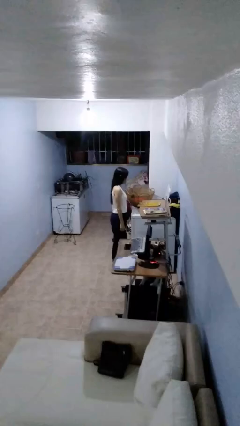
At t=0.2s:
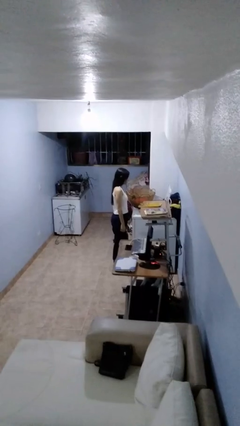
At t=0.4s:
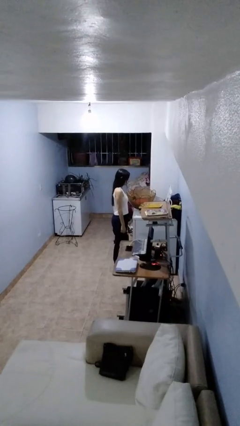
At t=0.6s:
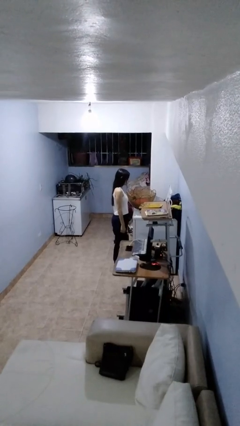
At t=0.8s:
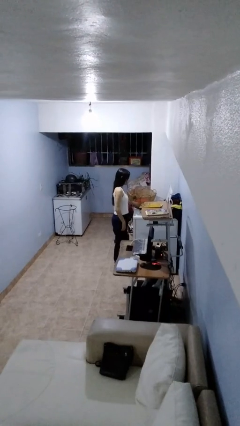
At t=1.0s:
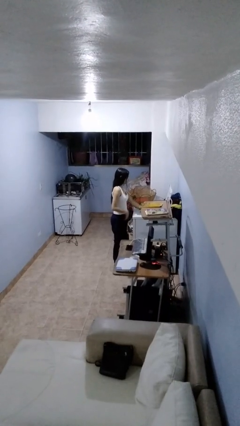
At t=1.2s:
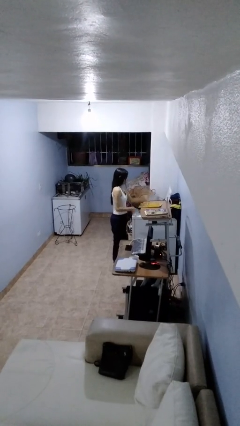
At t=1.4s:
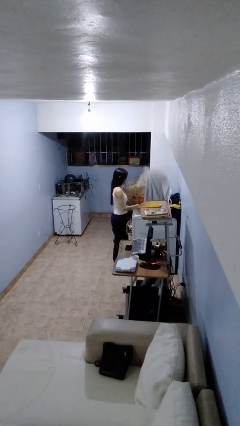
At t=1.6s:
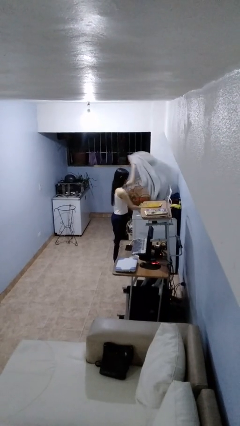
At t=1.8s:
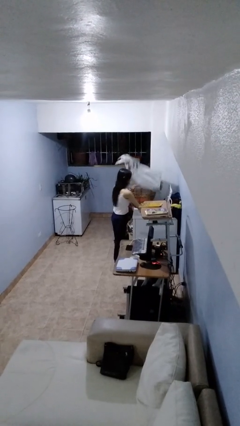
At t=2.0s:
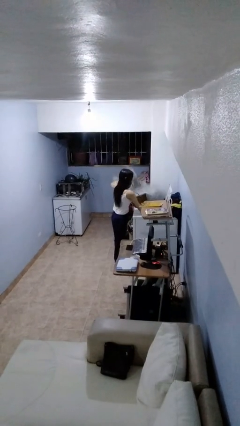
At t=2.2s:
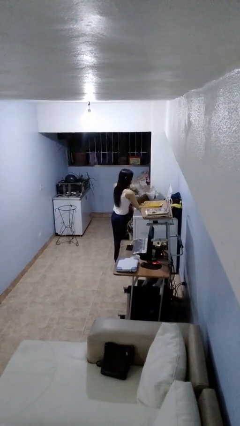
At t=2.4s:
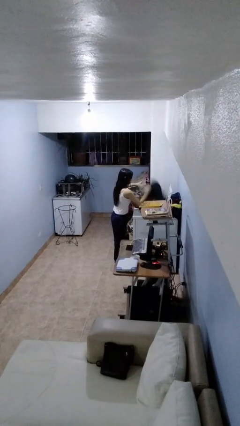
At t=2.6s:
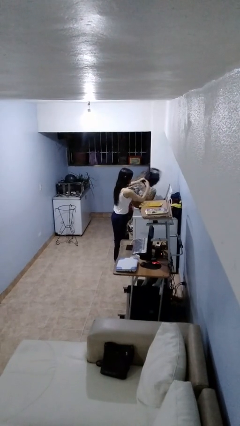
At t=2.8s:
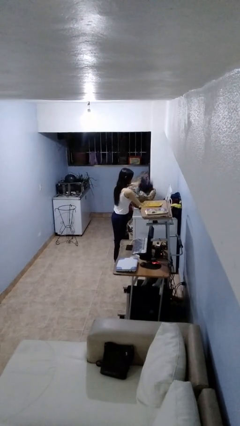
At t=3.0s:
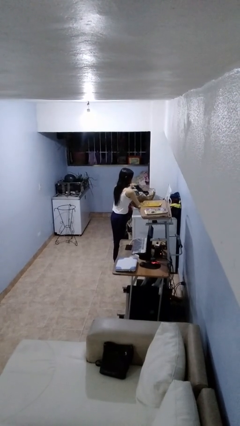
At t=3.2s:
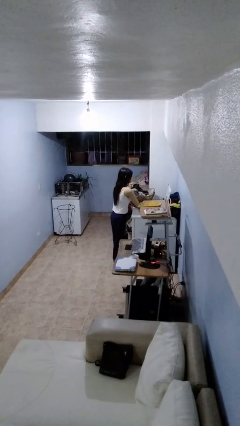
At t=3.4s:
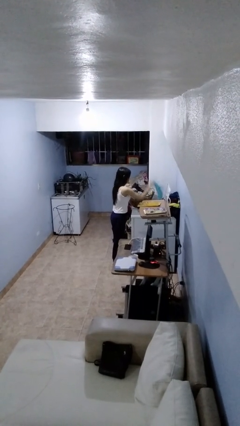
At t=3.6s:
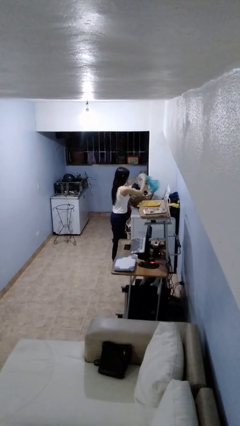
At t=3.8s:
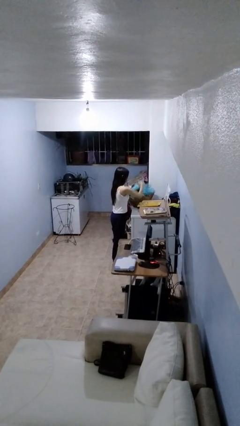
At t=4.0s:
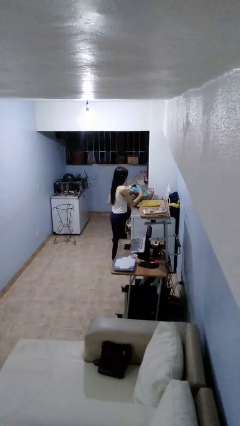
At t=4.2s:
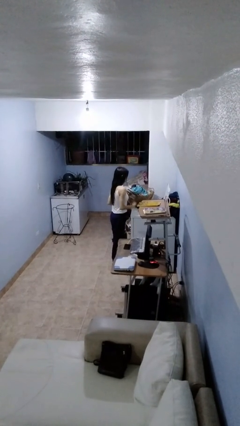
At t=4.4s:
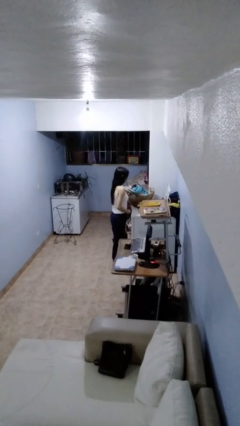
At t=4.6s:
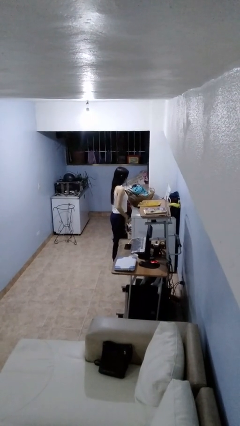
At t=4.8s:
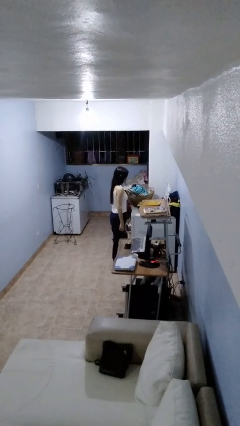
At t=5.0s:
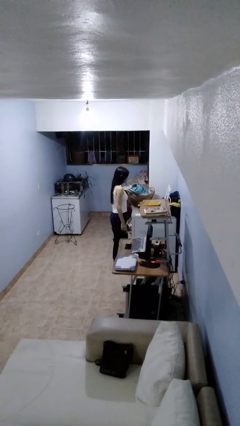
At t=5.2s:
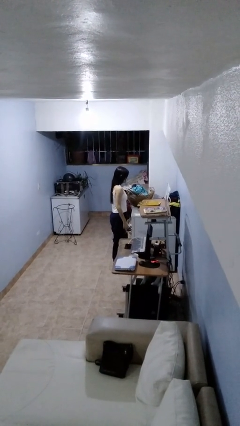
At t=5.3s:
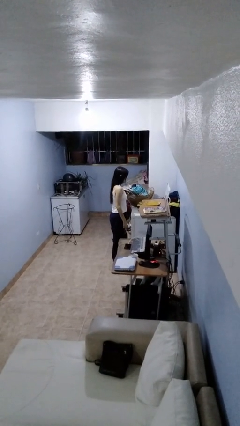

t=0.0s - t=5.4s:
person unloads clotheswasher

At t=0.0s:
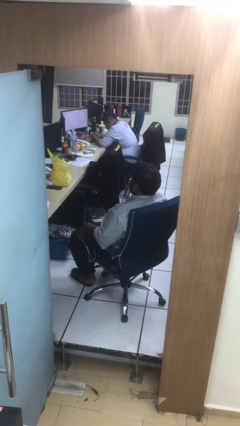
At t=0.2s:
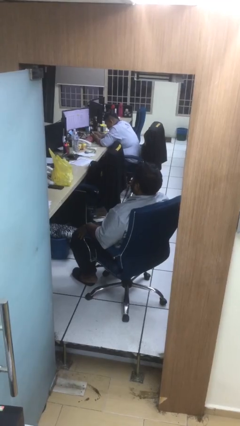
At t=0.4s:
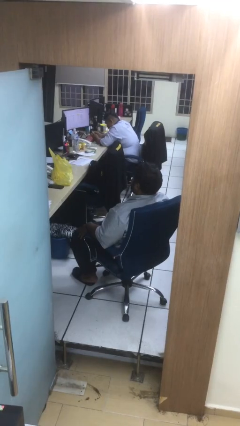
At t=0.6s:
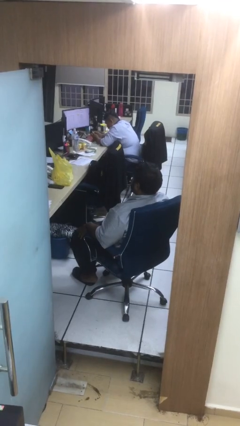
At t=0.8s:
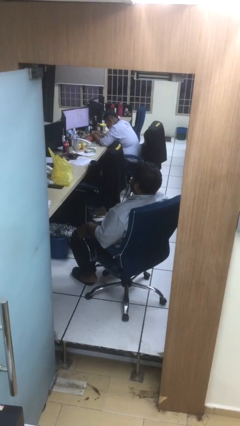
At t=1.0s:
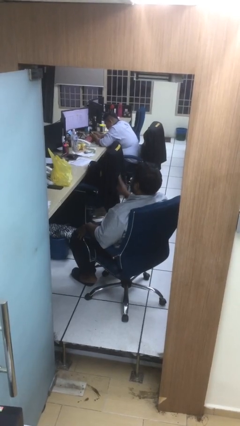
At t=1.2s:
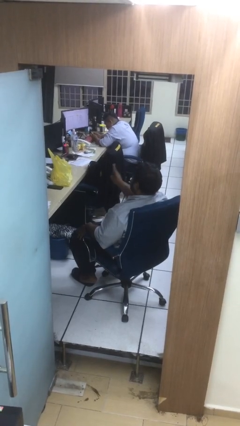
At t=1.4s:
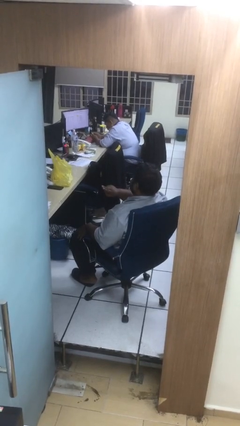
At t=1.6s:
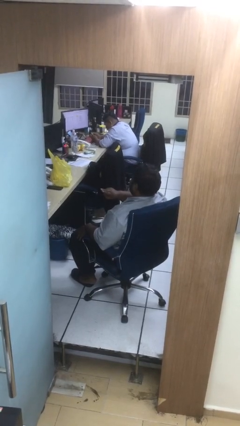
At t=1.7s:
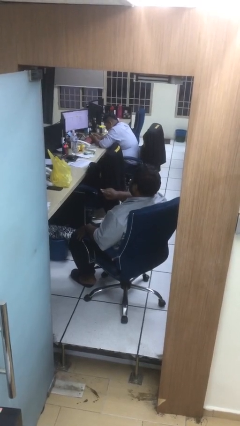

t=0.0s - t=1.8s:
person gestures swipe left

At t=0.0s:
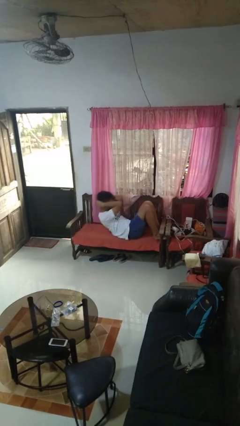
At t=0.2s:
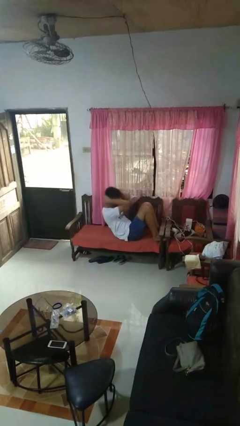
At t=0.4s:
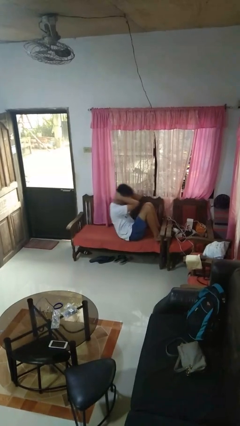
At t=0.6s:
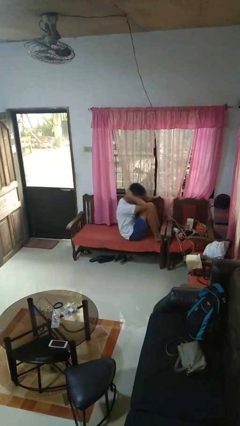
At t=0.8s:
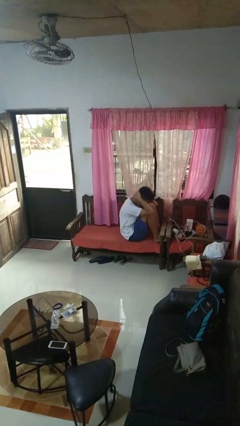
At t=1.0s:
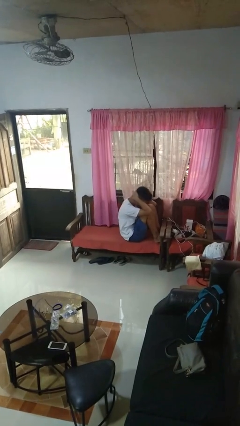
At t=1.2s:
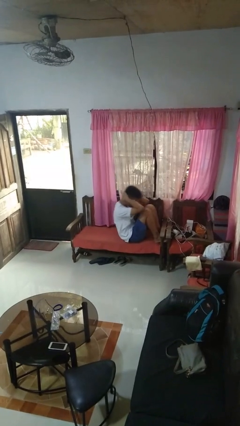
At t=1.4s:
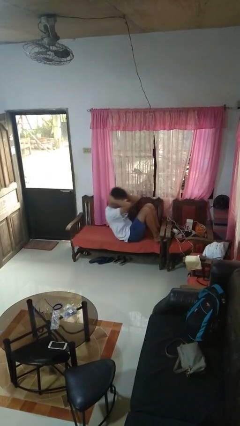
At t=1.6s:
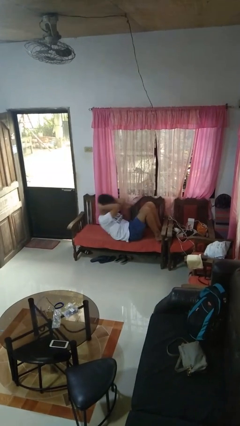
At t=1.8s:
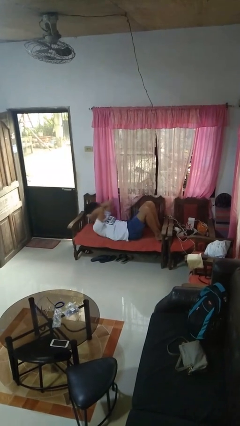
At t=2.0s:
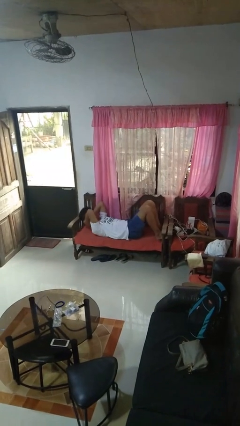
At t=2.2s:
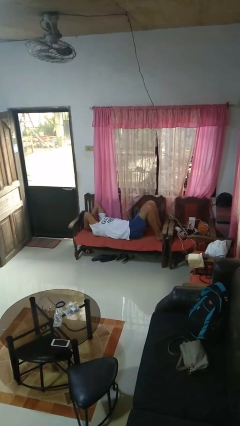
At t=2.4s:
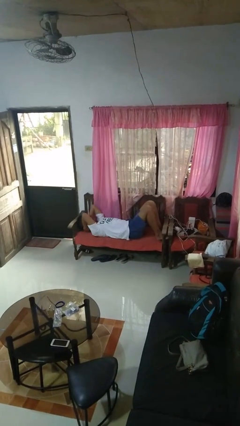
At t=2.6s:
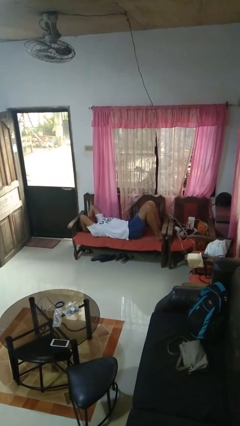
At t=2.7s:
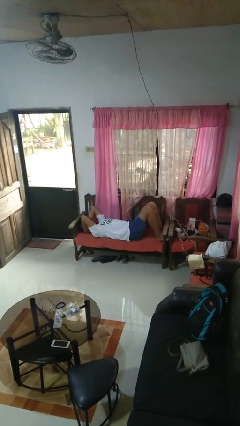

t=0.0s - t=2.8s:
person exercises with situp

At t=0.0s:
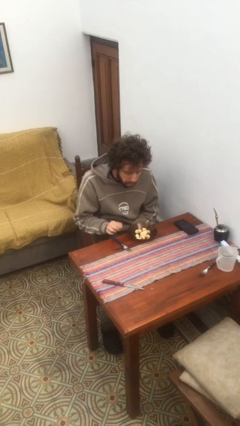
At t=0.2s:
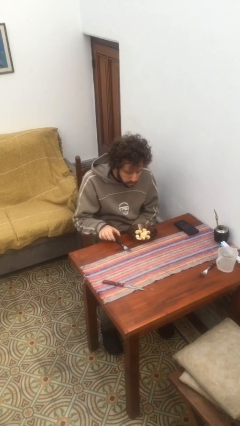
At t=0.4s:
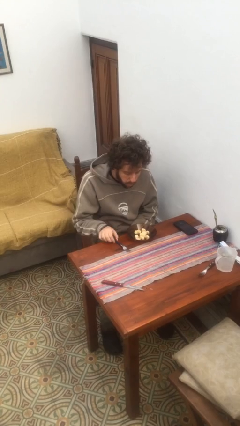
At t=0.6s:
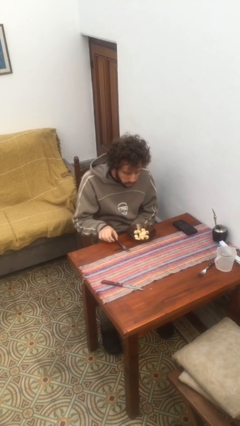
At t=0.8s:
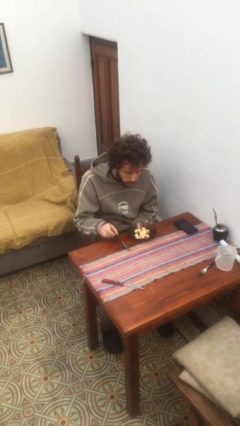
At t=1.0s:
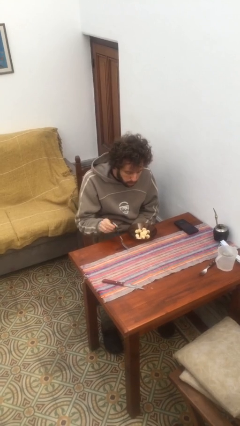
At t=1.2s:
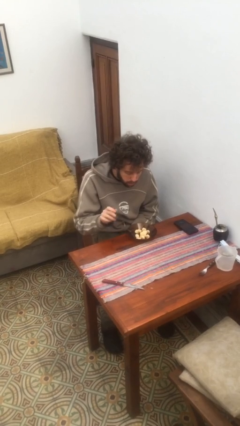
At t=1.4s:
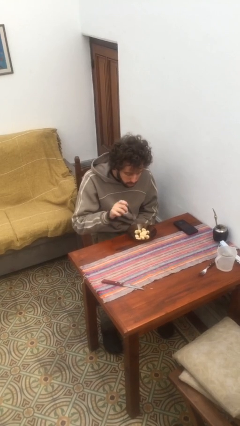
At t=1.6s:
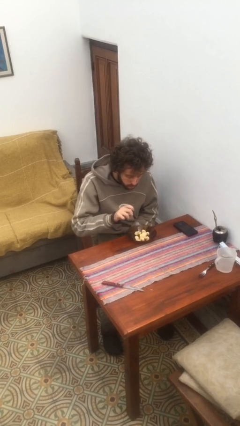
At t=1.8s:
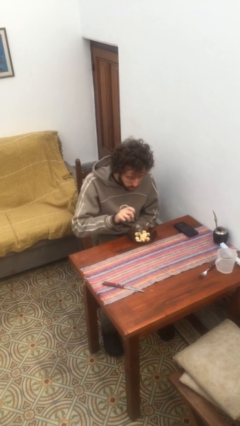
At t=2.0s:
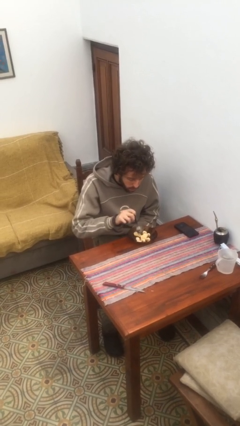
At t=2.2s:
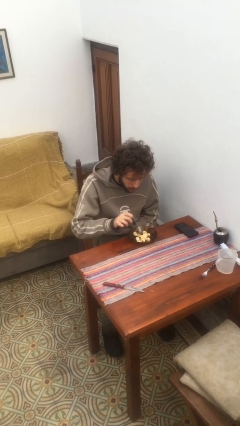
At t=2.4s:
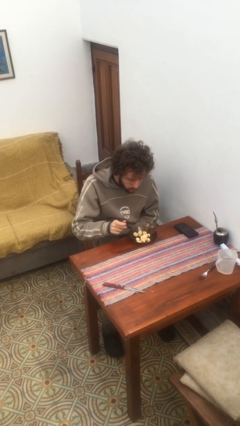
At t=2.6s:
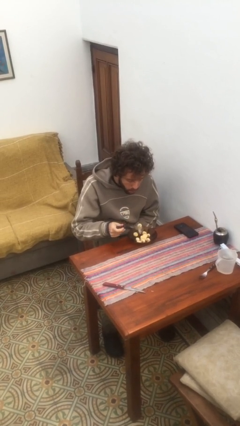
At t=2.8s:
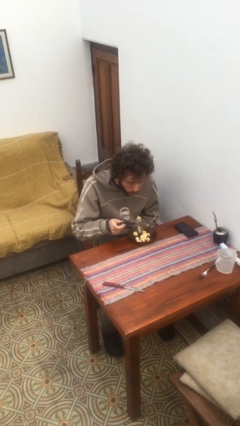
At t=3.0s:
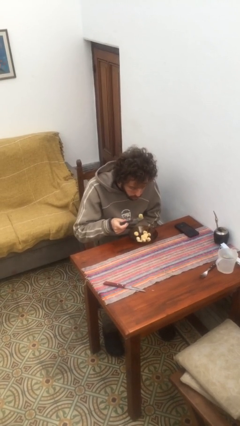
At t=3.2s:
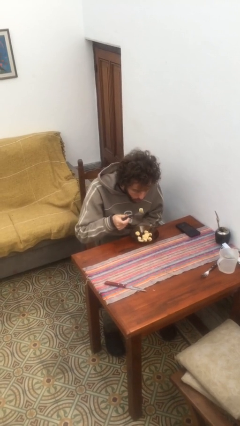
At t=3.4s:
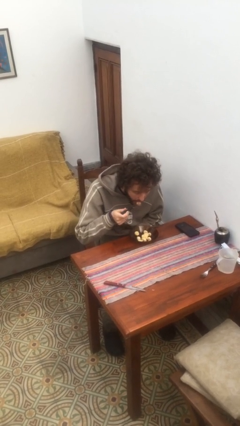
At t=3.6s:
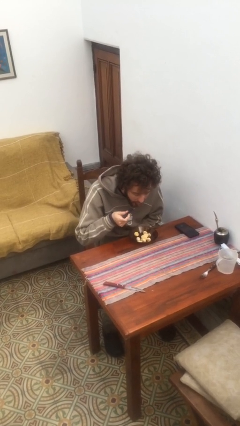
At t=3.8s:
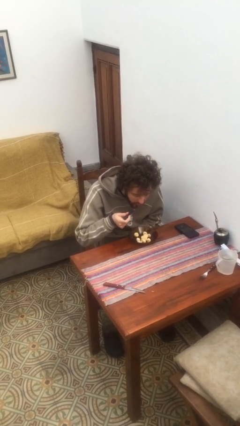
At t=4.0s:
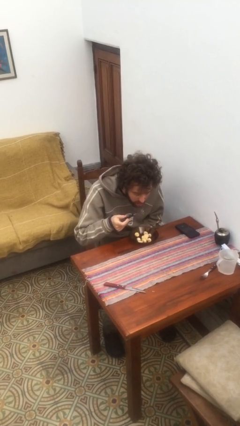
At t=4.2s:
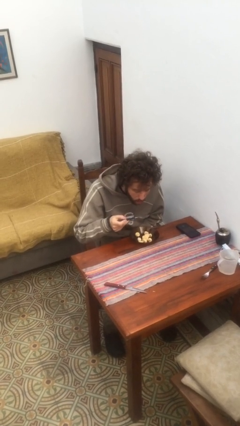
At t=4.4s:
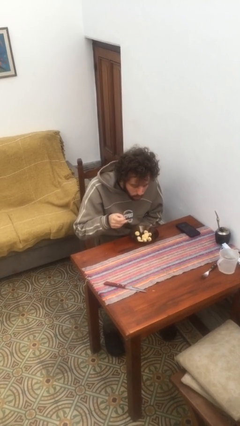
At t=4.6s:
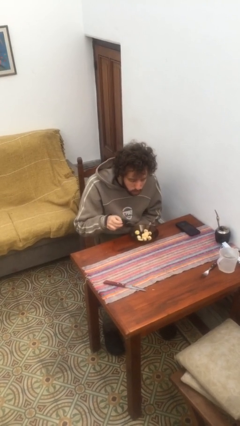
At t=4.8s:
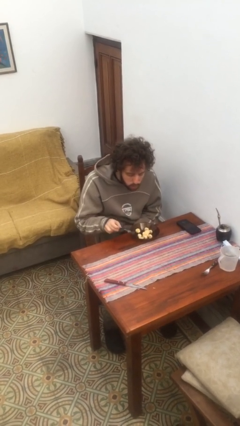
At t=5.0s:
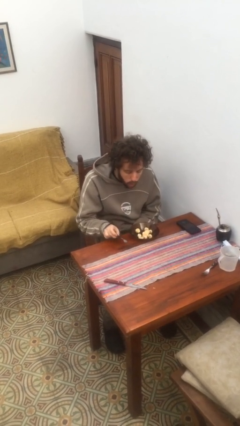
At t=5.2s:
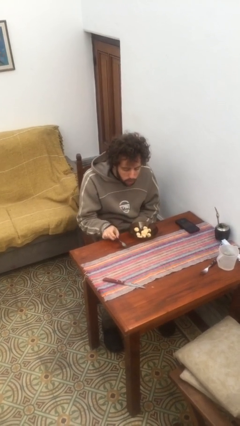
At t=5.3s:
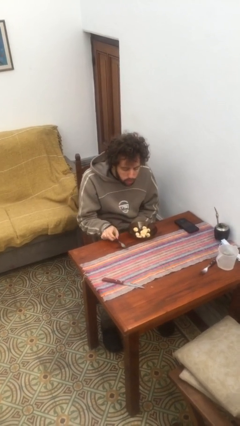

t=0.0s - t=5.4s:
person eats with utensil

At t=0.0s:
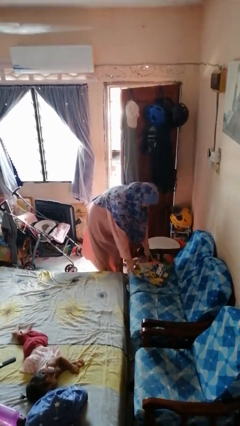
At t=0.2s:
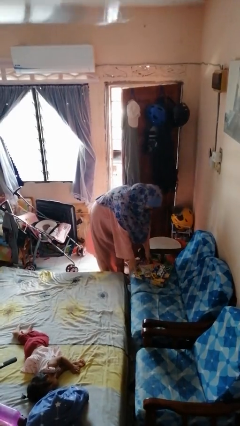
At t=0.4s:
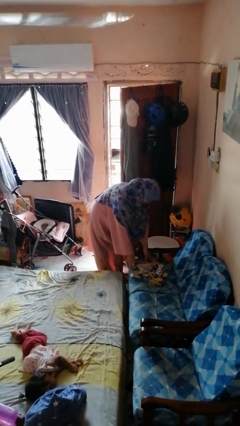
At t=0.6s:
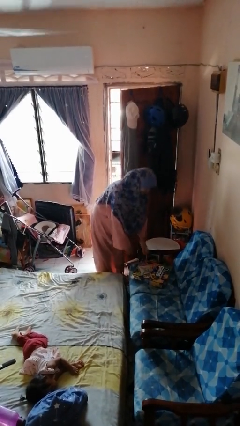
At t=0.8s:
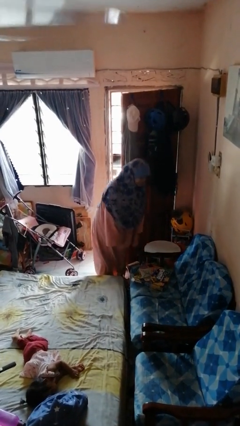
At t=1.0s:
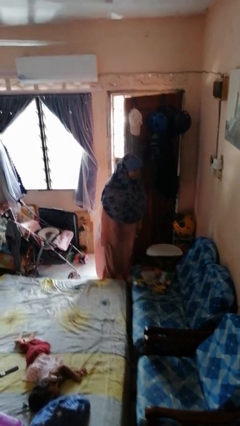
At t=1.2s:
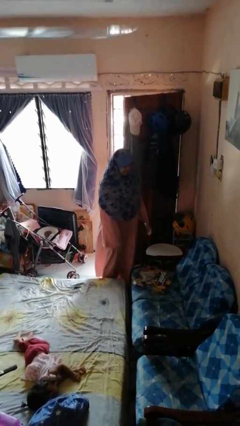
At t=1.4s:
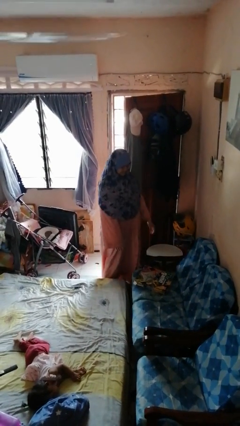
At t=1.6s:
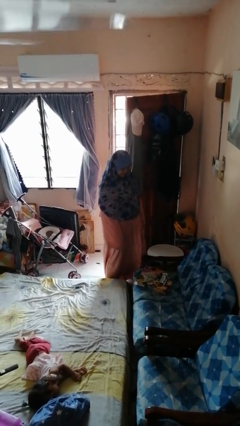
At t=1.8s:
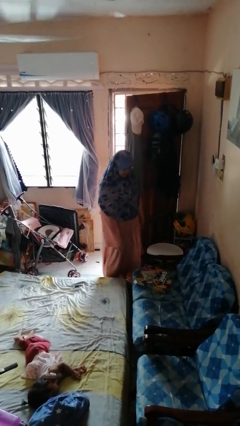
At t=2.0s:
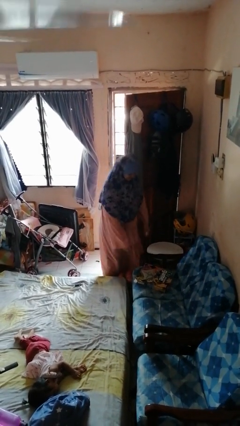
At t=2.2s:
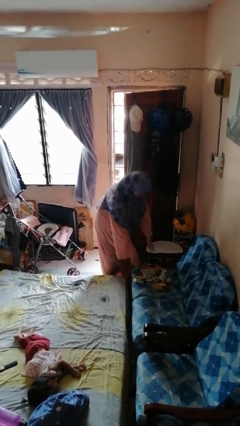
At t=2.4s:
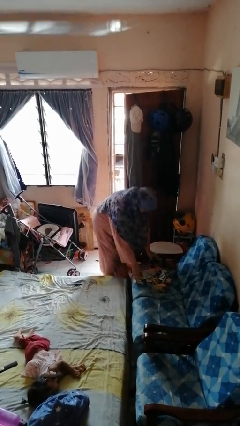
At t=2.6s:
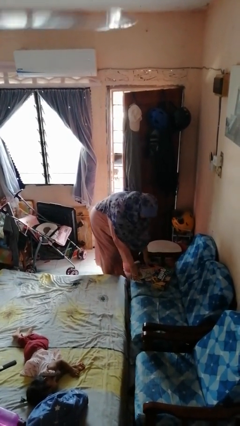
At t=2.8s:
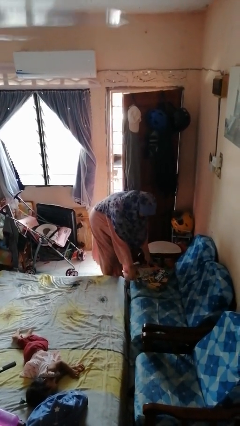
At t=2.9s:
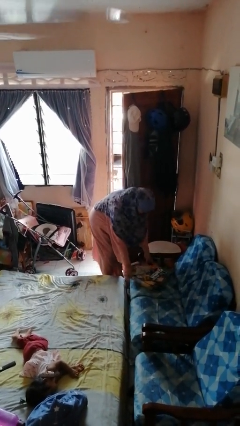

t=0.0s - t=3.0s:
person picks up object from couch
